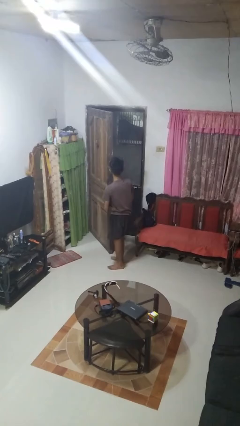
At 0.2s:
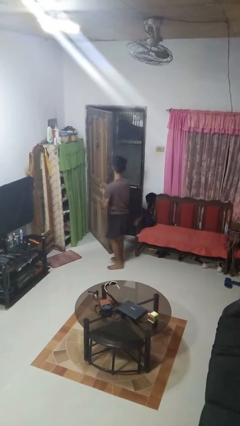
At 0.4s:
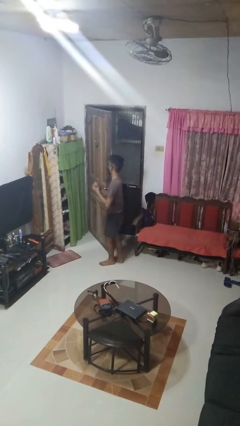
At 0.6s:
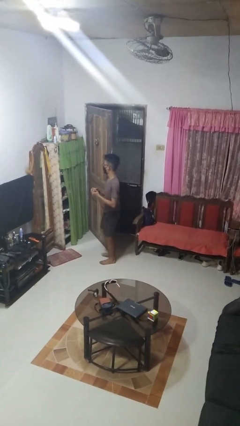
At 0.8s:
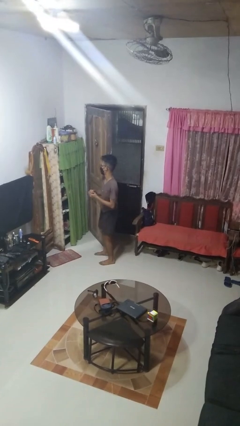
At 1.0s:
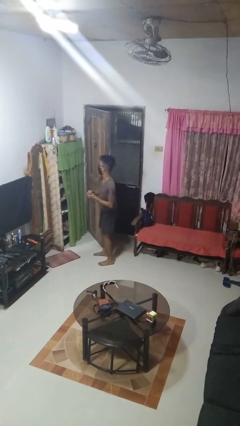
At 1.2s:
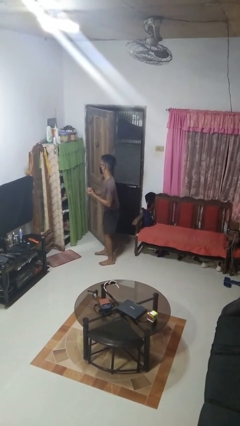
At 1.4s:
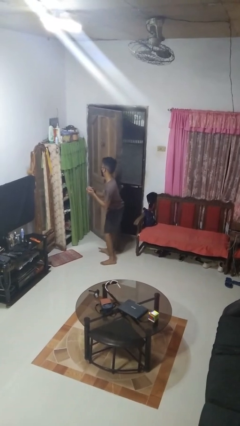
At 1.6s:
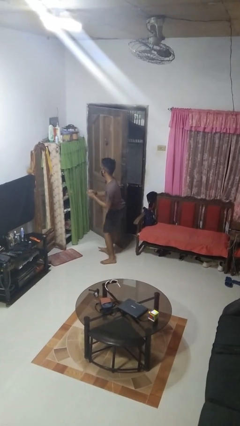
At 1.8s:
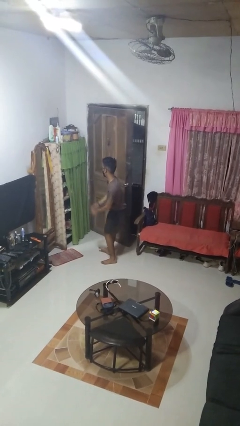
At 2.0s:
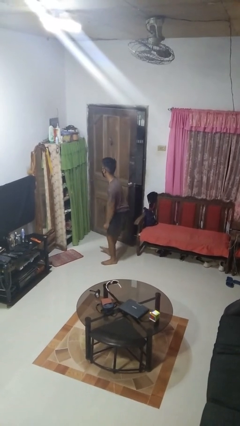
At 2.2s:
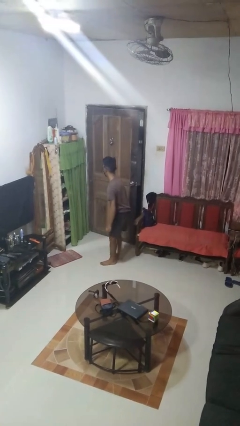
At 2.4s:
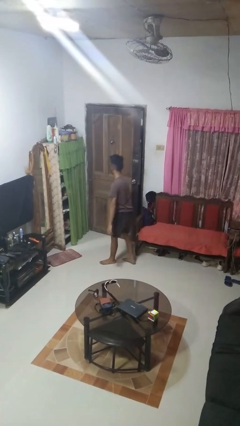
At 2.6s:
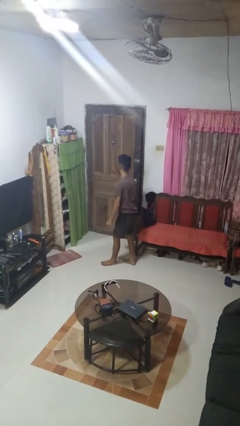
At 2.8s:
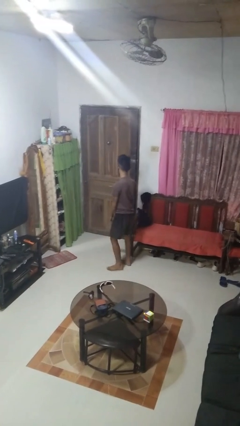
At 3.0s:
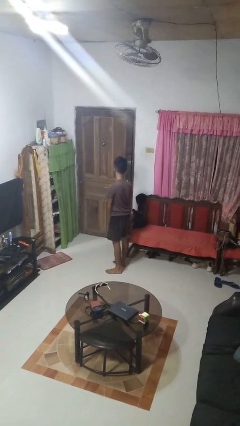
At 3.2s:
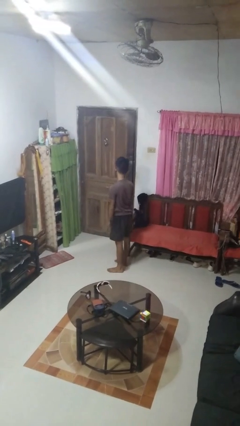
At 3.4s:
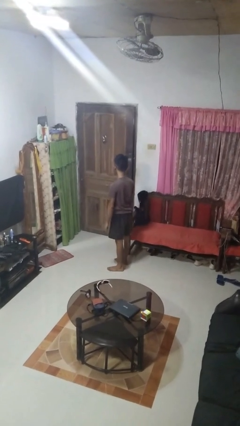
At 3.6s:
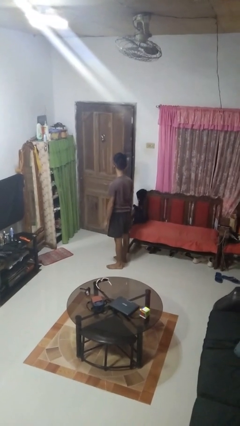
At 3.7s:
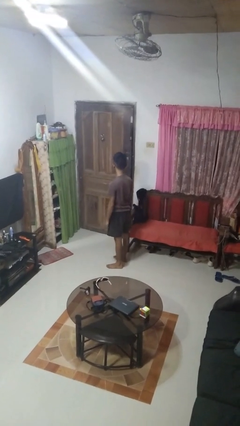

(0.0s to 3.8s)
person closes door with hip

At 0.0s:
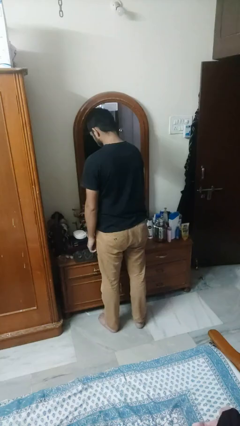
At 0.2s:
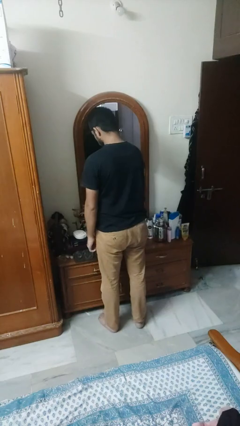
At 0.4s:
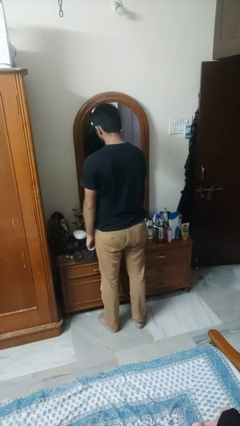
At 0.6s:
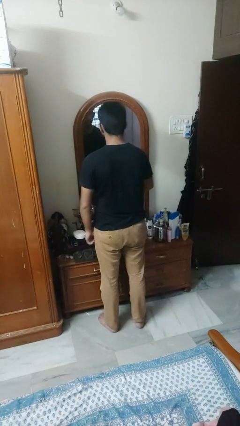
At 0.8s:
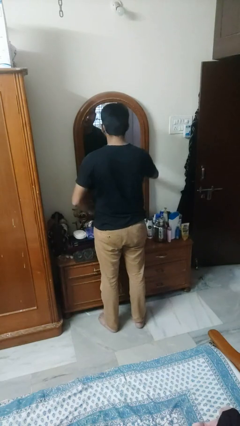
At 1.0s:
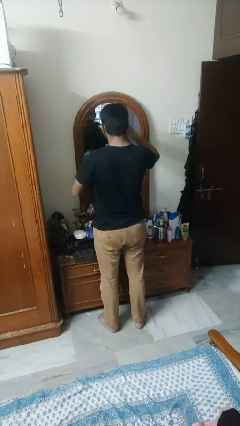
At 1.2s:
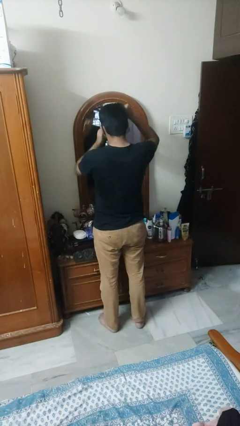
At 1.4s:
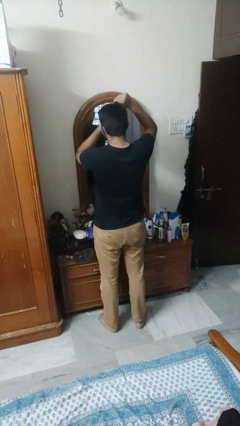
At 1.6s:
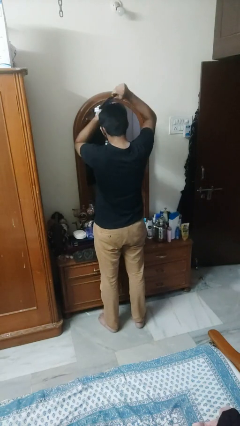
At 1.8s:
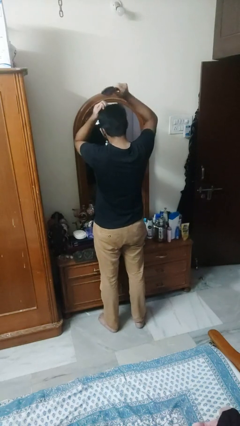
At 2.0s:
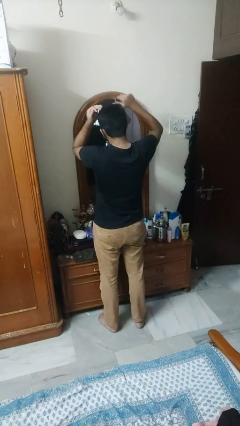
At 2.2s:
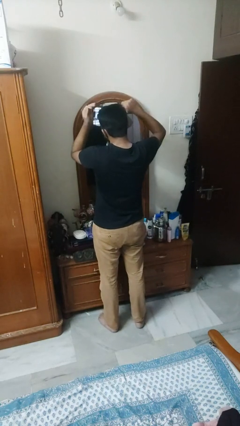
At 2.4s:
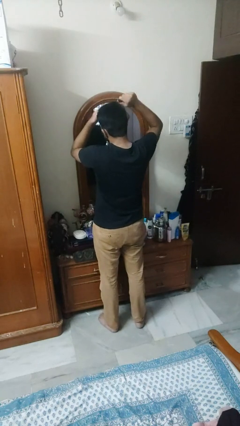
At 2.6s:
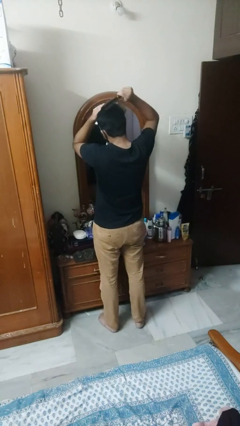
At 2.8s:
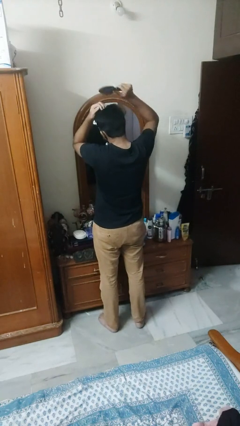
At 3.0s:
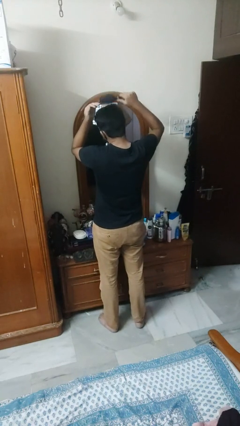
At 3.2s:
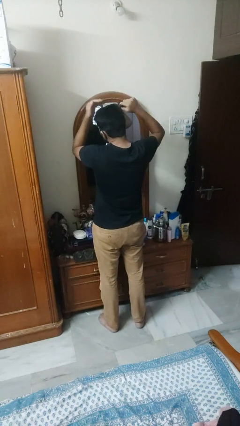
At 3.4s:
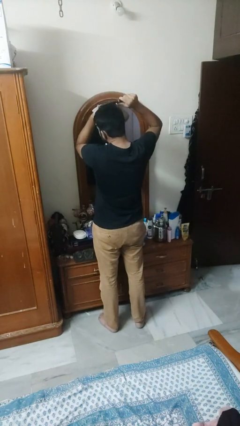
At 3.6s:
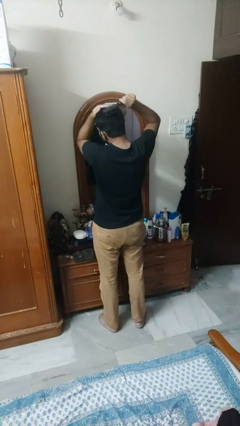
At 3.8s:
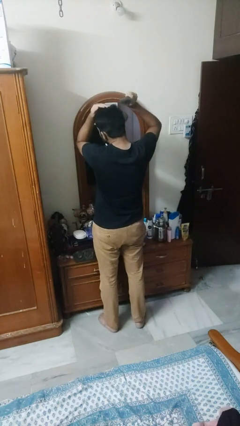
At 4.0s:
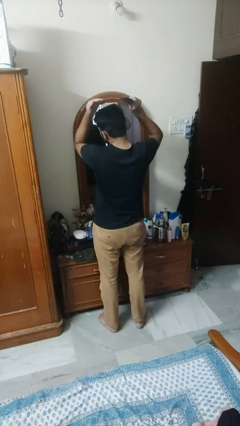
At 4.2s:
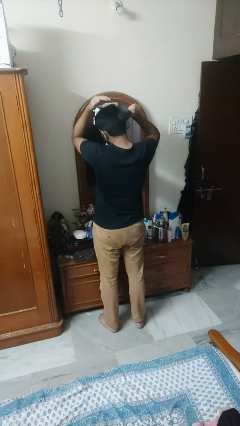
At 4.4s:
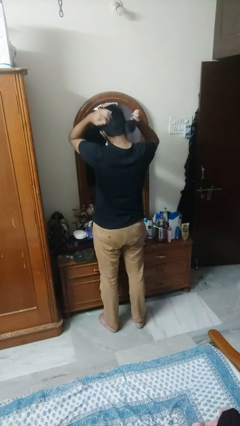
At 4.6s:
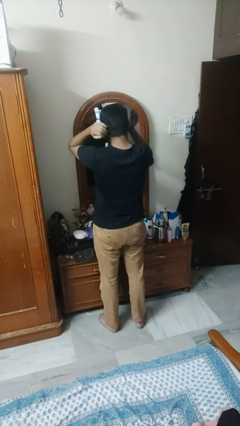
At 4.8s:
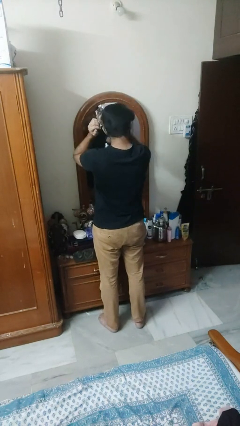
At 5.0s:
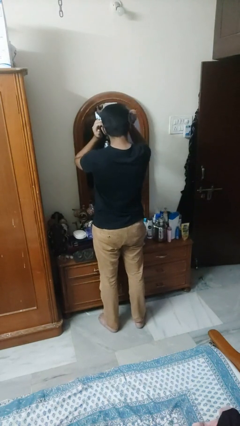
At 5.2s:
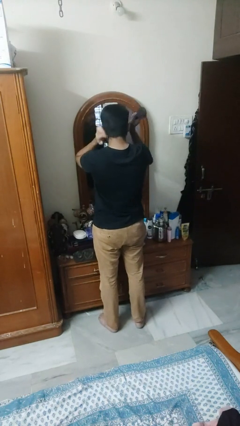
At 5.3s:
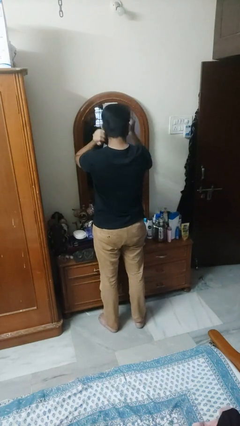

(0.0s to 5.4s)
person brushes hair

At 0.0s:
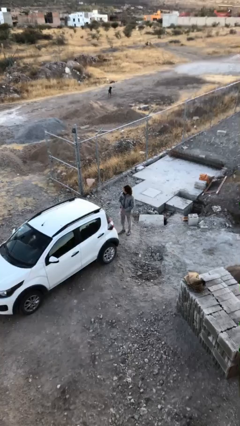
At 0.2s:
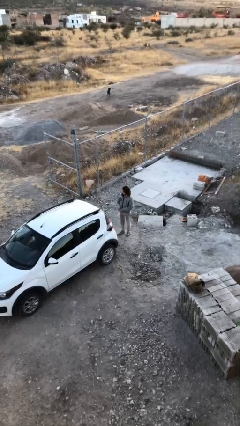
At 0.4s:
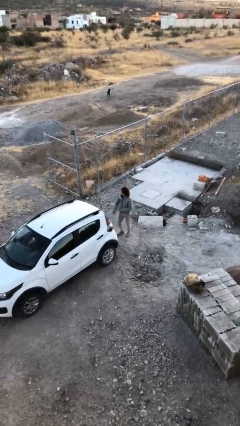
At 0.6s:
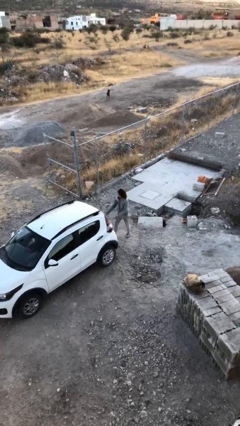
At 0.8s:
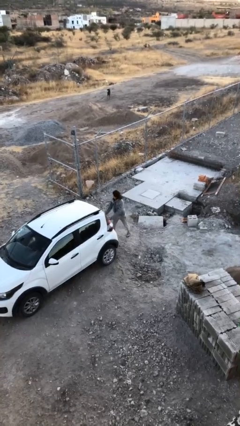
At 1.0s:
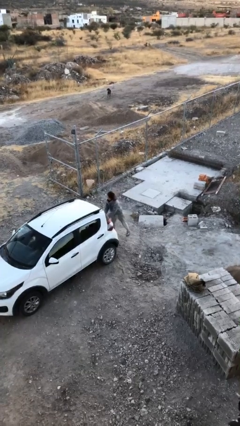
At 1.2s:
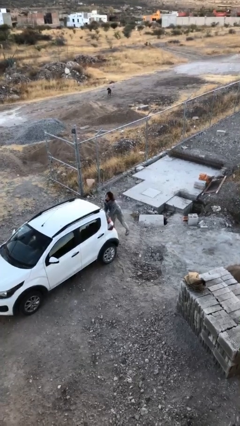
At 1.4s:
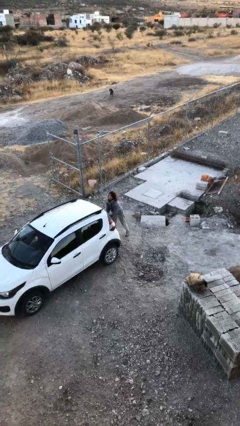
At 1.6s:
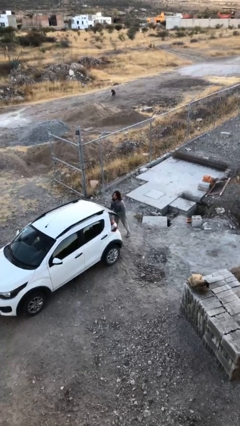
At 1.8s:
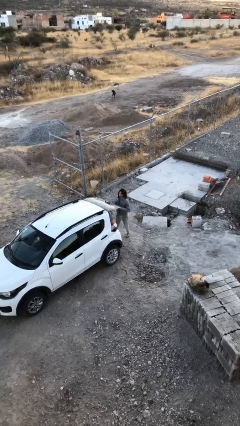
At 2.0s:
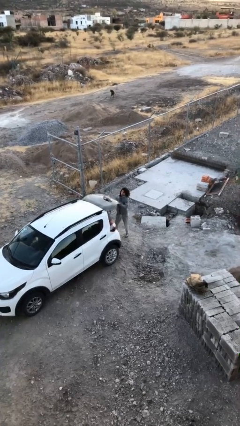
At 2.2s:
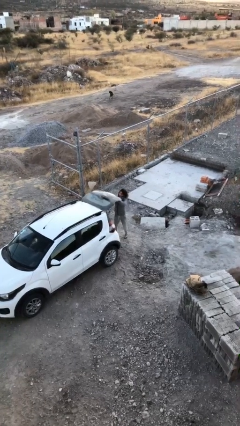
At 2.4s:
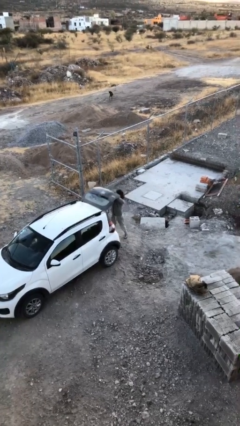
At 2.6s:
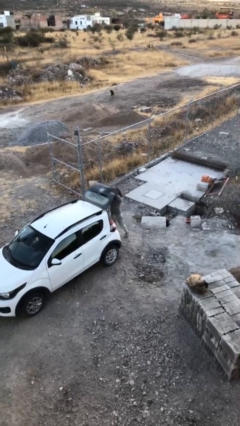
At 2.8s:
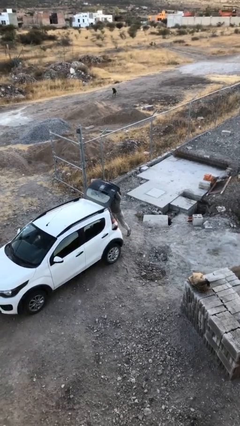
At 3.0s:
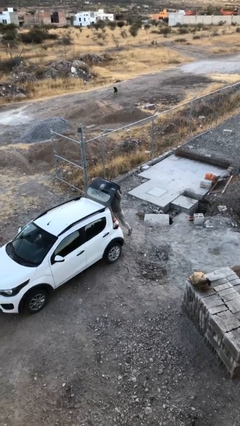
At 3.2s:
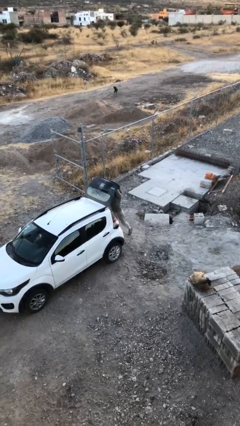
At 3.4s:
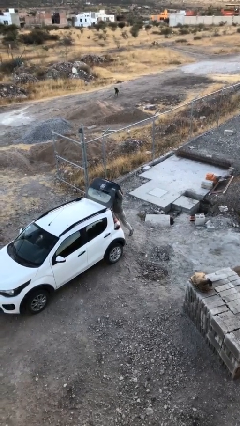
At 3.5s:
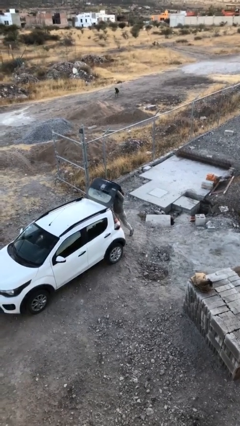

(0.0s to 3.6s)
person opens car trunk

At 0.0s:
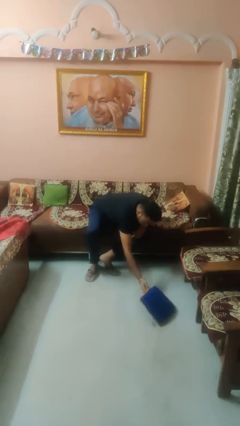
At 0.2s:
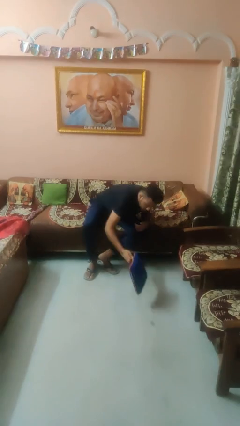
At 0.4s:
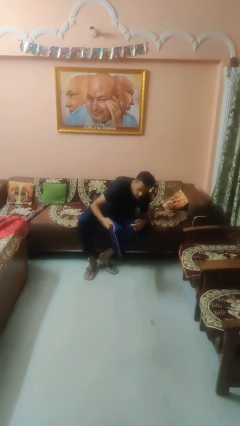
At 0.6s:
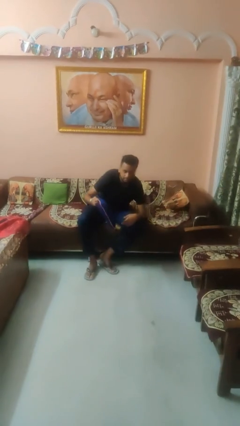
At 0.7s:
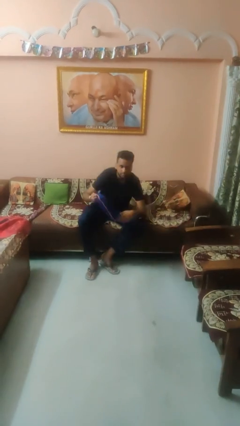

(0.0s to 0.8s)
person picks up object from floor

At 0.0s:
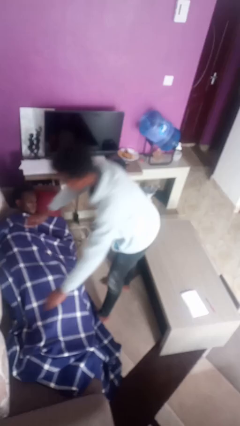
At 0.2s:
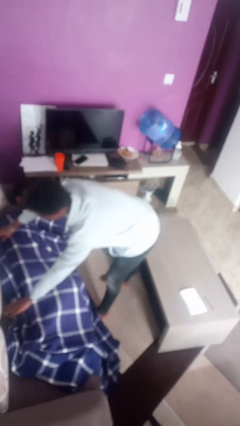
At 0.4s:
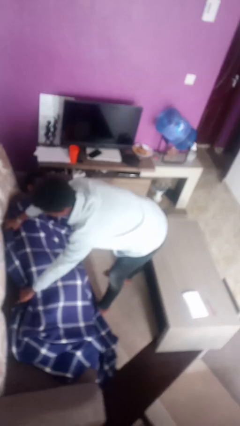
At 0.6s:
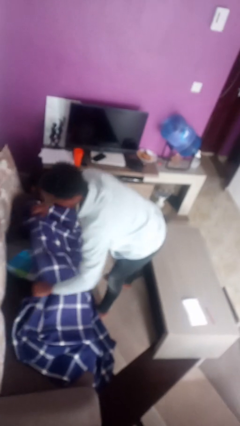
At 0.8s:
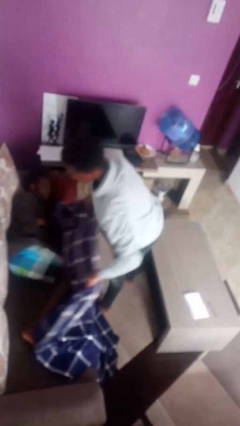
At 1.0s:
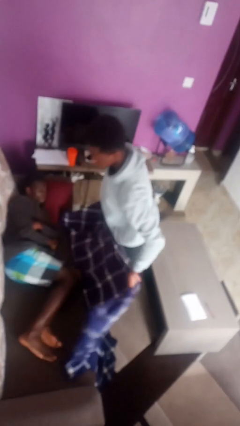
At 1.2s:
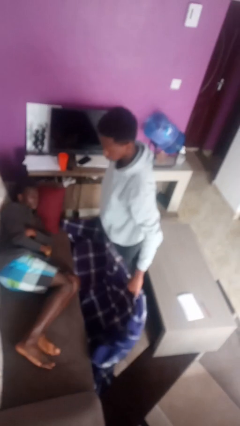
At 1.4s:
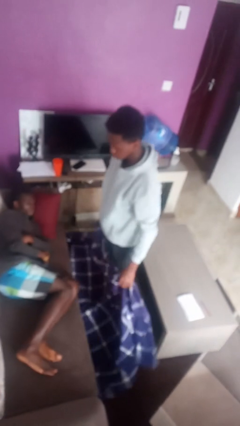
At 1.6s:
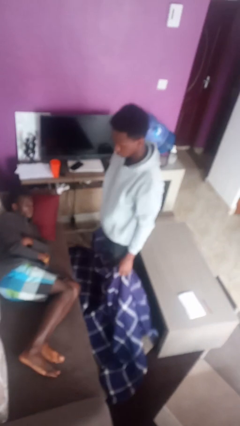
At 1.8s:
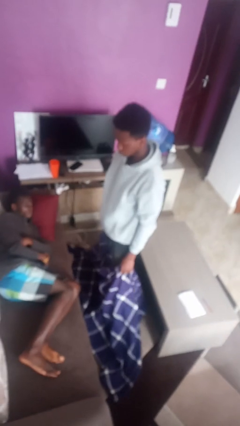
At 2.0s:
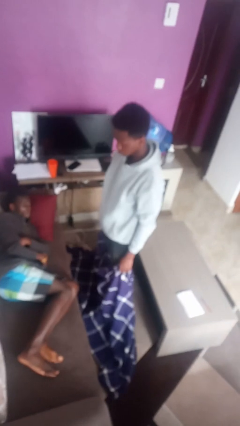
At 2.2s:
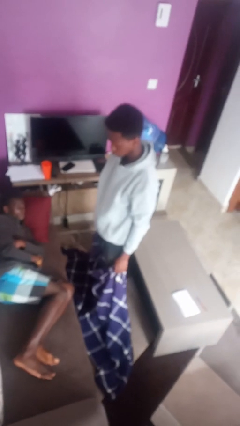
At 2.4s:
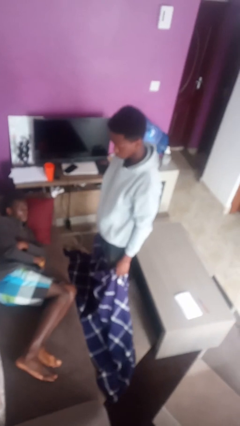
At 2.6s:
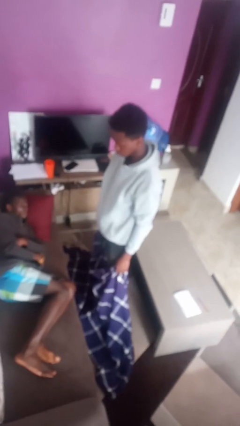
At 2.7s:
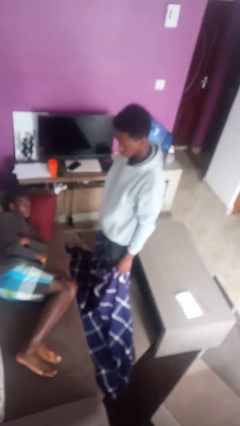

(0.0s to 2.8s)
person uncovers friend with blanket

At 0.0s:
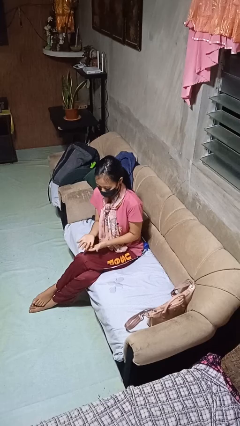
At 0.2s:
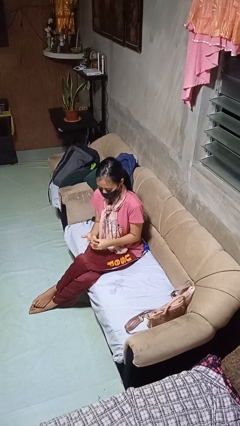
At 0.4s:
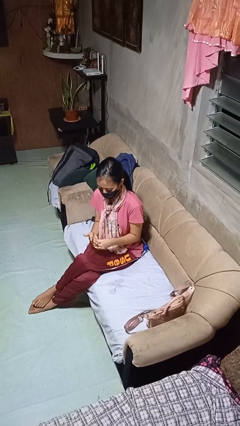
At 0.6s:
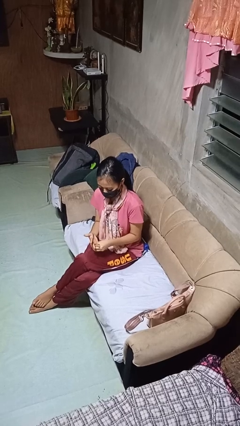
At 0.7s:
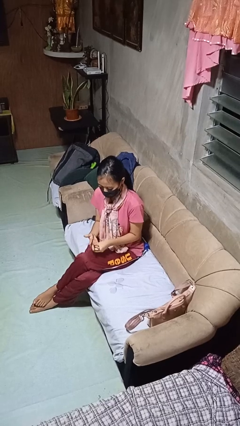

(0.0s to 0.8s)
person takes off ring
